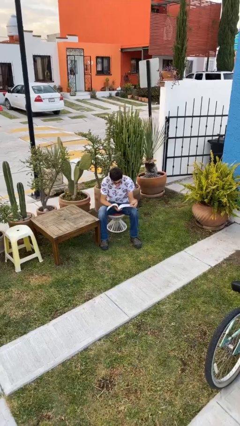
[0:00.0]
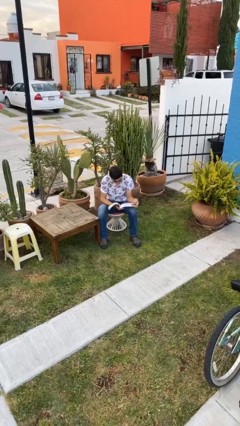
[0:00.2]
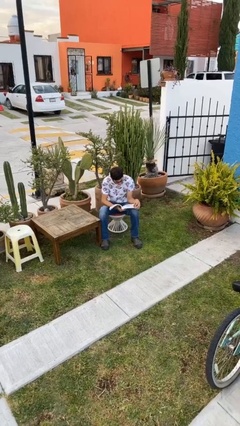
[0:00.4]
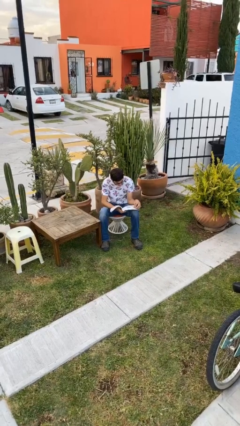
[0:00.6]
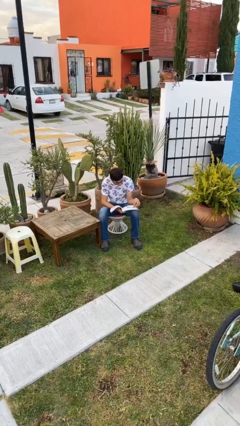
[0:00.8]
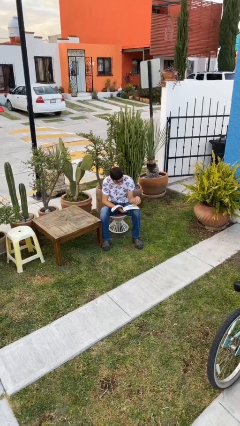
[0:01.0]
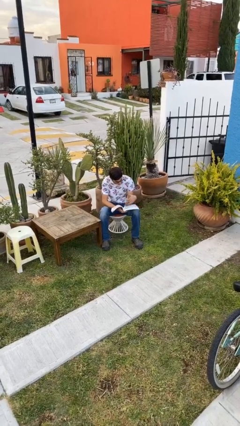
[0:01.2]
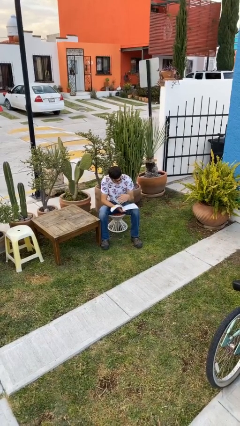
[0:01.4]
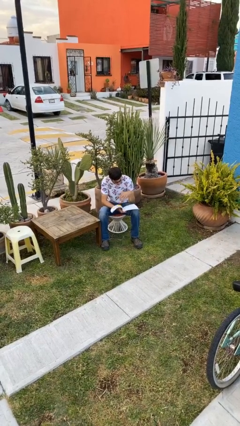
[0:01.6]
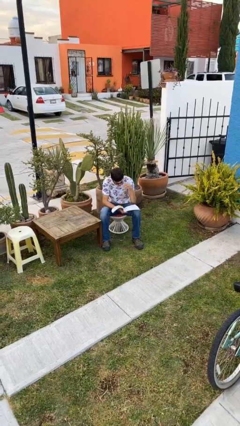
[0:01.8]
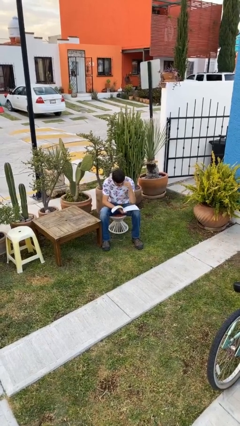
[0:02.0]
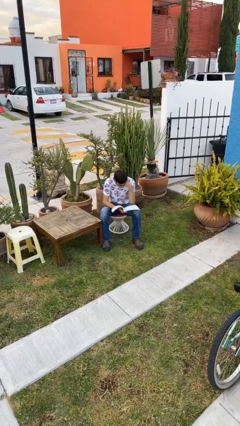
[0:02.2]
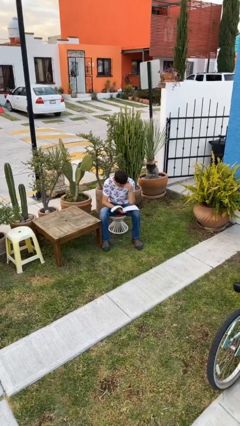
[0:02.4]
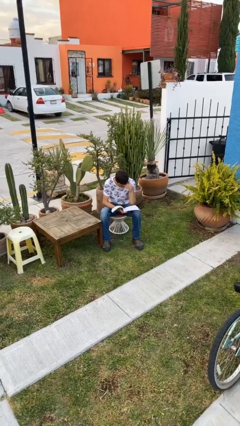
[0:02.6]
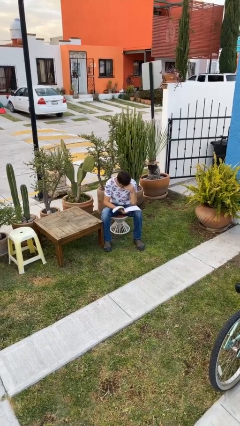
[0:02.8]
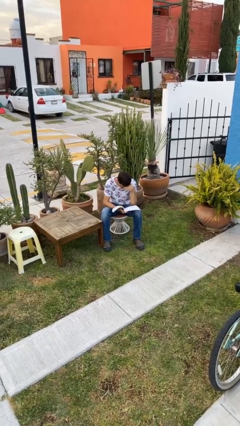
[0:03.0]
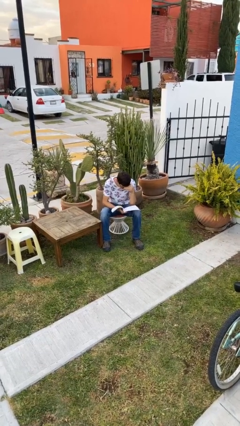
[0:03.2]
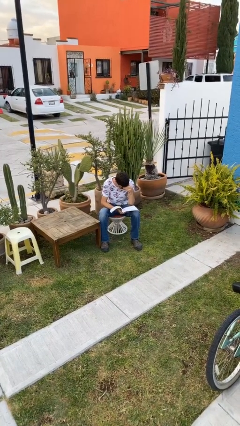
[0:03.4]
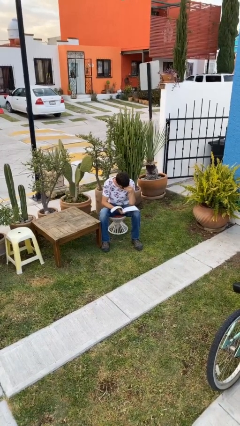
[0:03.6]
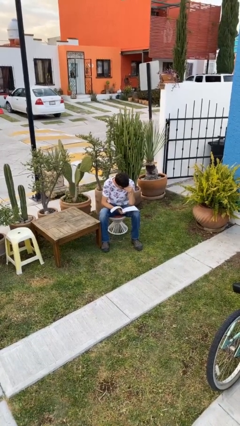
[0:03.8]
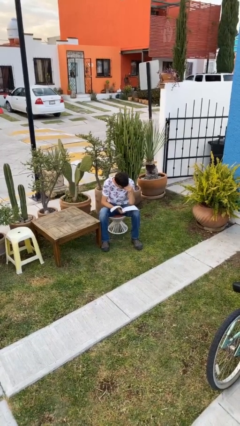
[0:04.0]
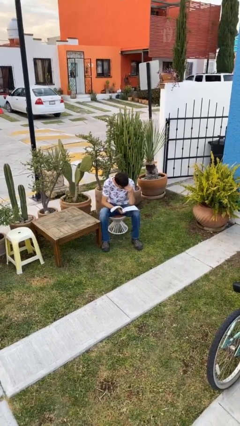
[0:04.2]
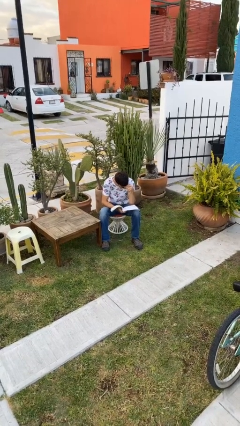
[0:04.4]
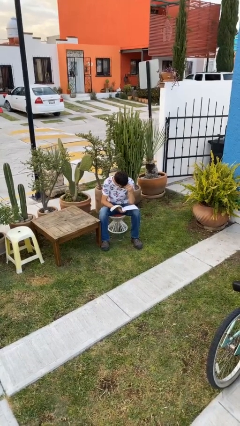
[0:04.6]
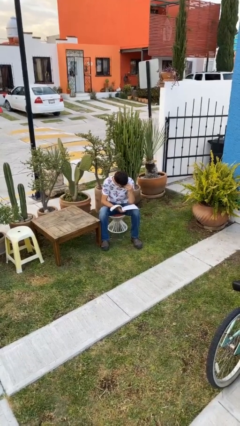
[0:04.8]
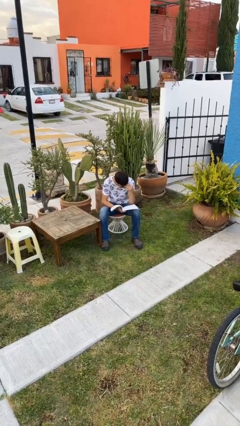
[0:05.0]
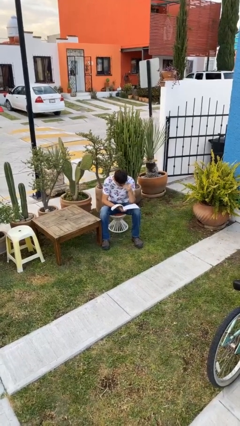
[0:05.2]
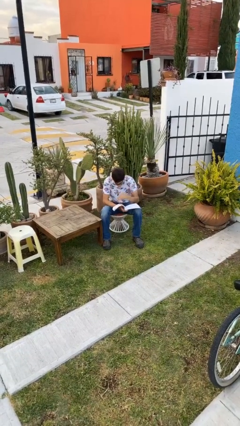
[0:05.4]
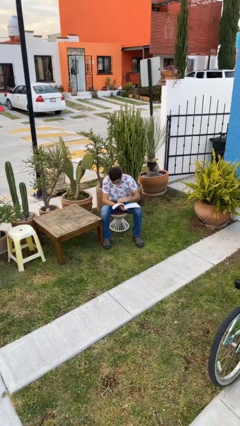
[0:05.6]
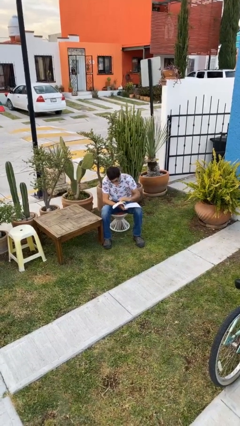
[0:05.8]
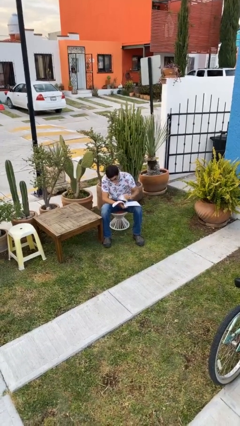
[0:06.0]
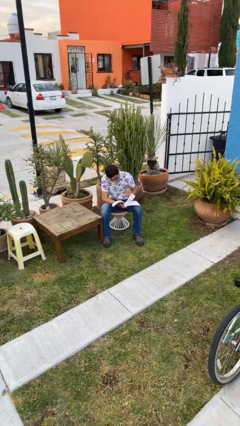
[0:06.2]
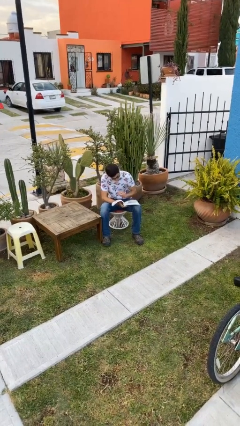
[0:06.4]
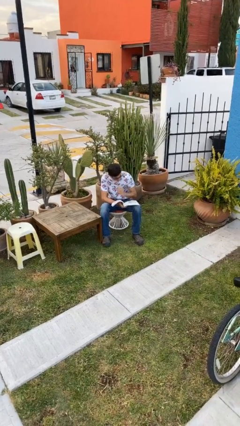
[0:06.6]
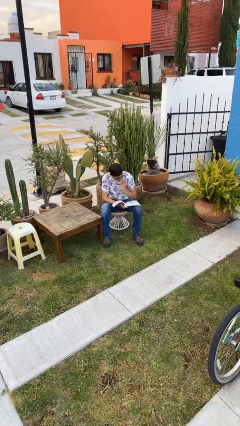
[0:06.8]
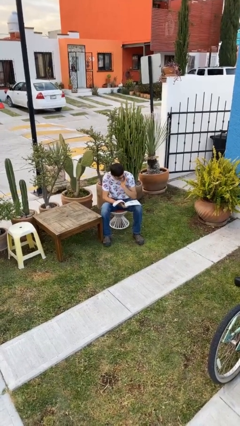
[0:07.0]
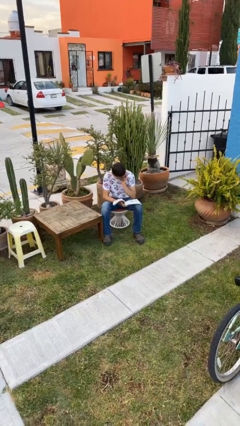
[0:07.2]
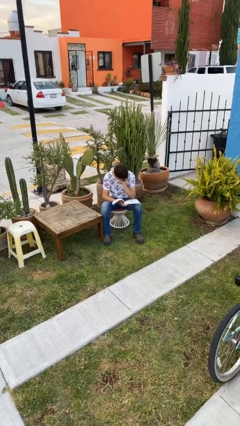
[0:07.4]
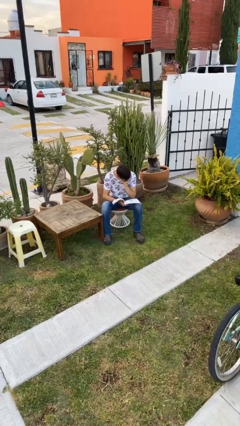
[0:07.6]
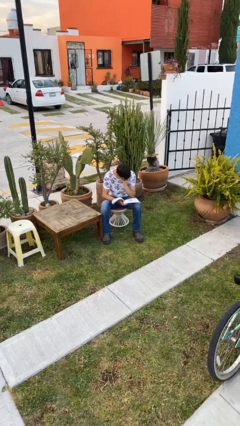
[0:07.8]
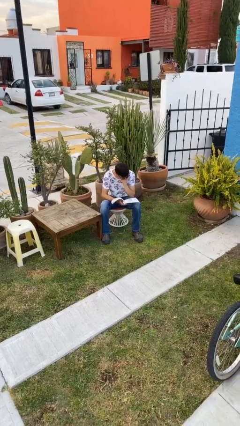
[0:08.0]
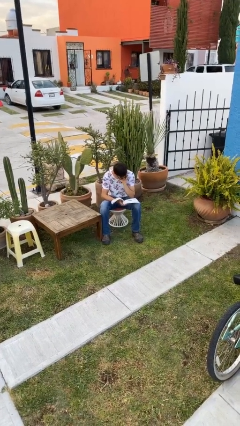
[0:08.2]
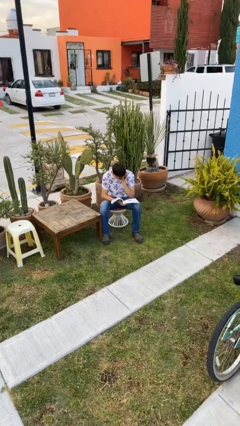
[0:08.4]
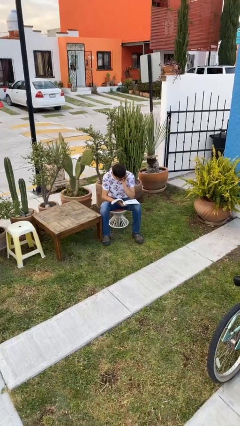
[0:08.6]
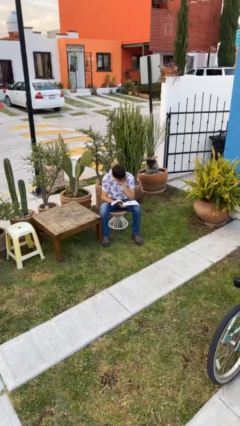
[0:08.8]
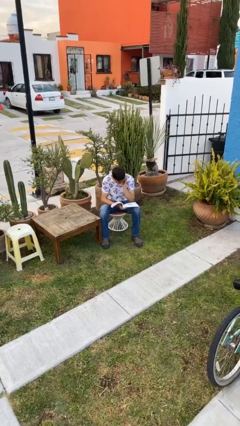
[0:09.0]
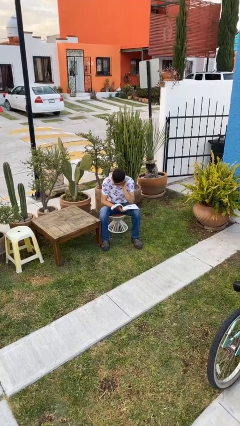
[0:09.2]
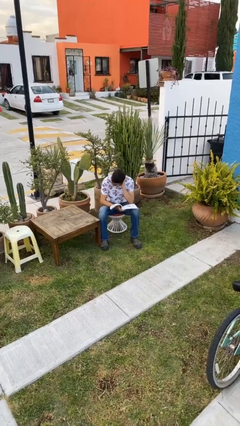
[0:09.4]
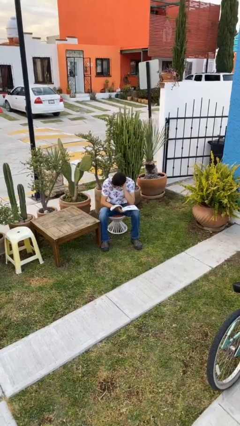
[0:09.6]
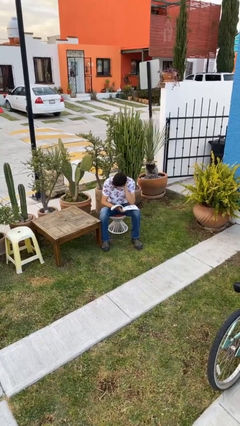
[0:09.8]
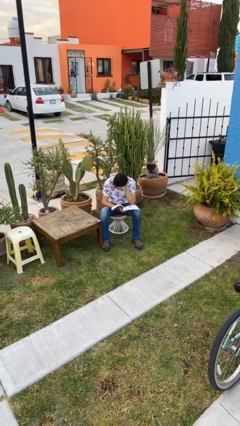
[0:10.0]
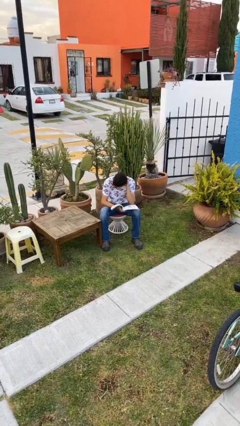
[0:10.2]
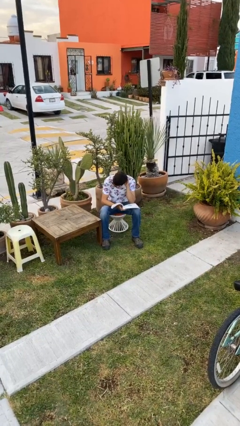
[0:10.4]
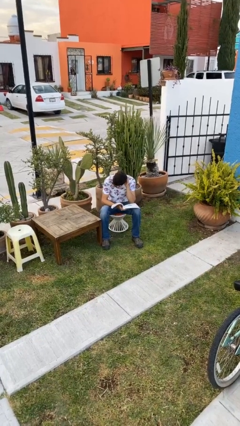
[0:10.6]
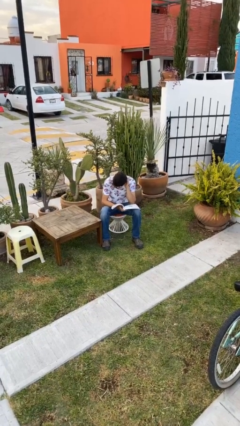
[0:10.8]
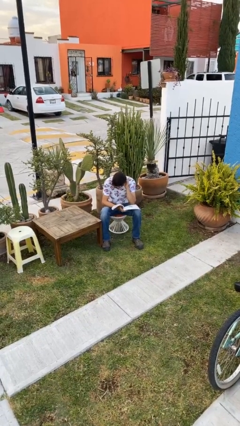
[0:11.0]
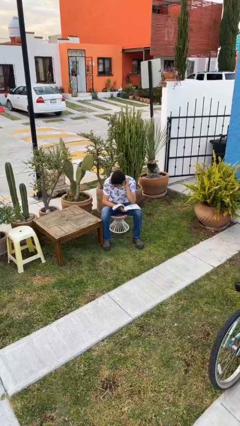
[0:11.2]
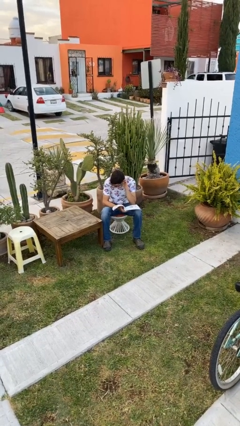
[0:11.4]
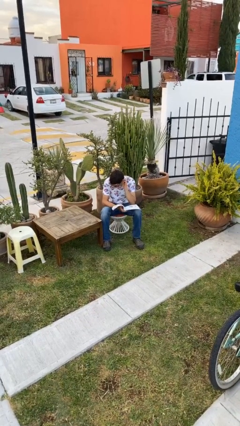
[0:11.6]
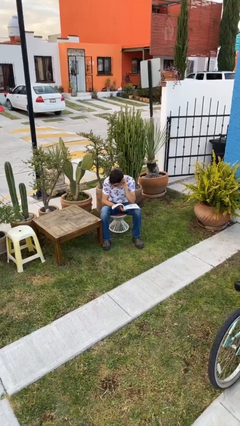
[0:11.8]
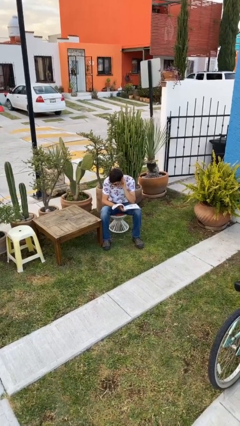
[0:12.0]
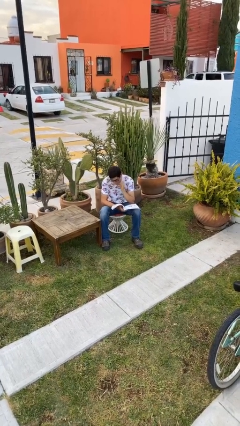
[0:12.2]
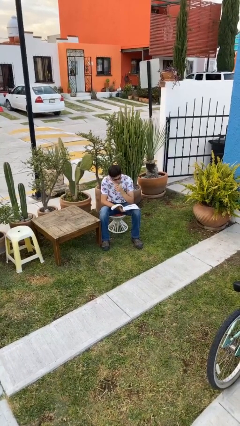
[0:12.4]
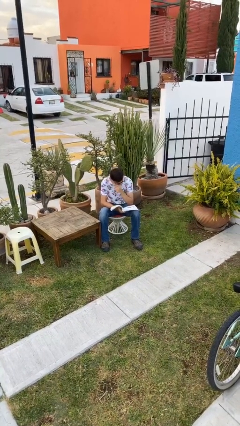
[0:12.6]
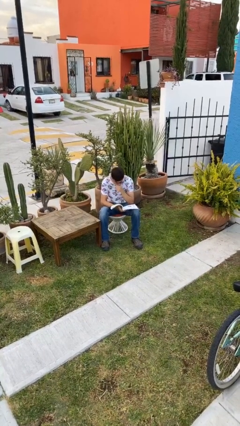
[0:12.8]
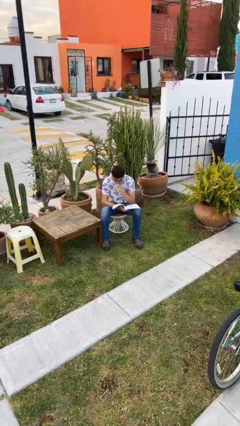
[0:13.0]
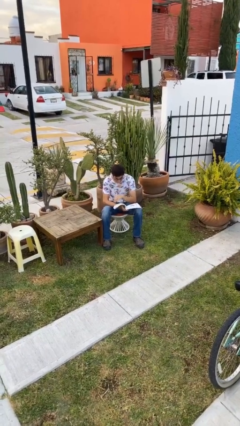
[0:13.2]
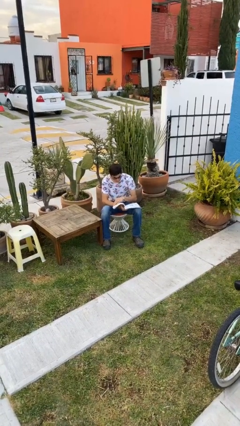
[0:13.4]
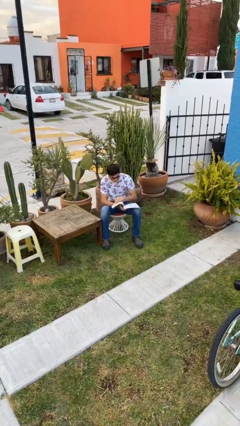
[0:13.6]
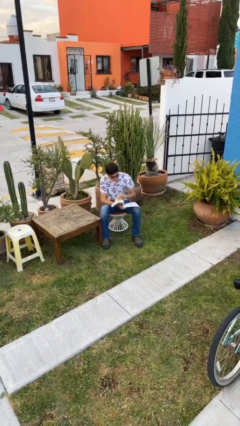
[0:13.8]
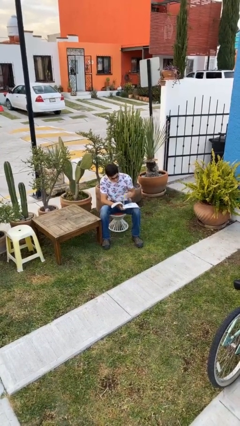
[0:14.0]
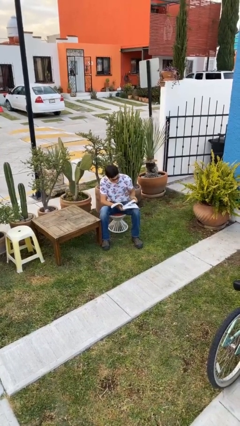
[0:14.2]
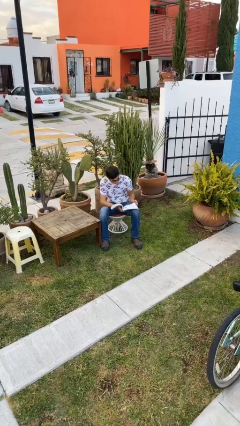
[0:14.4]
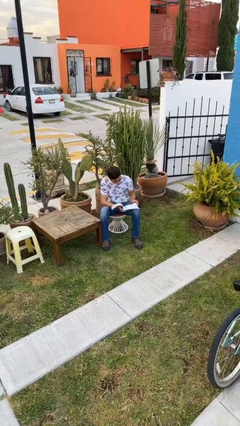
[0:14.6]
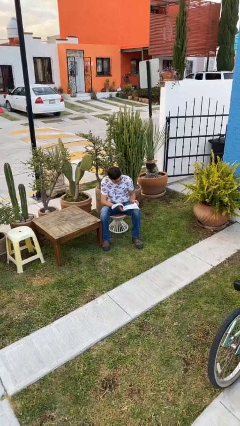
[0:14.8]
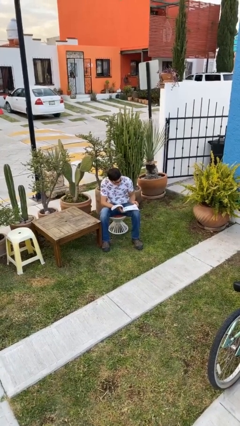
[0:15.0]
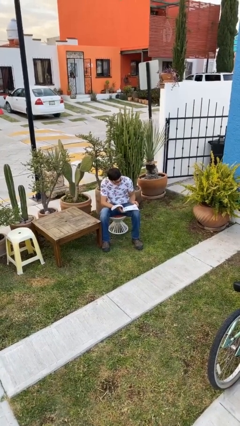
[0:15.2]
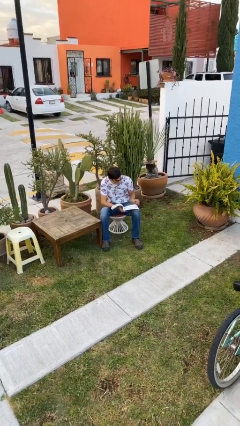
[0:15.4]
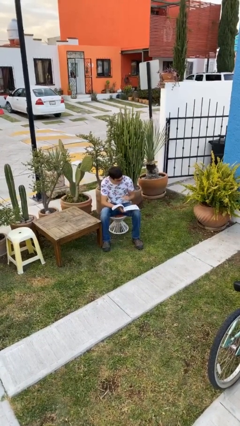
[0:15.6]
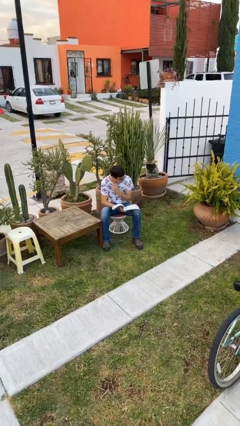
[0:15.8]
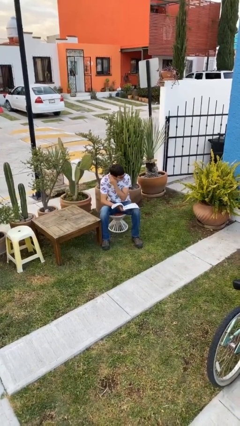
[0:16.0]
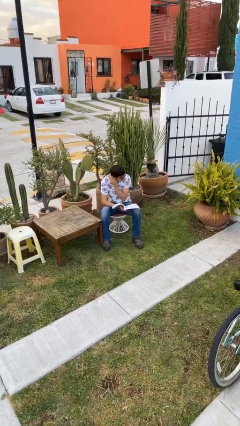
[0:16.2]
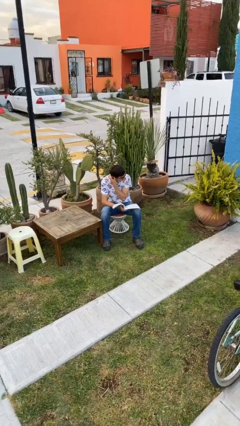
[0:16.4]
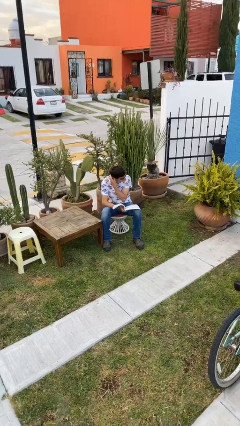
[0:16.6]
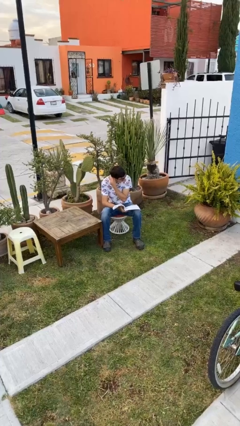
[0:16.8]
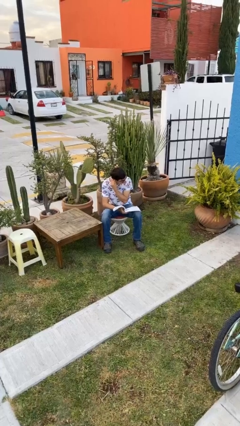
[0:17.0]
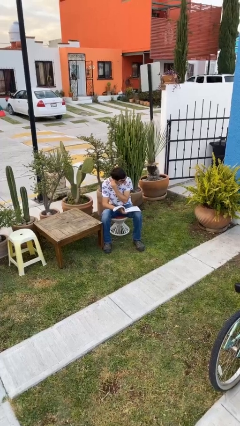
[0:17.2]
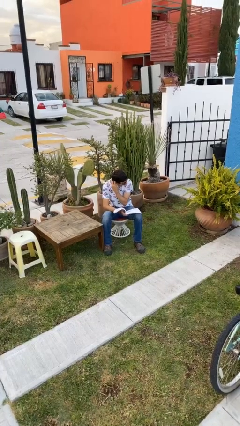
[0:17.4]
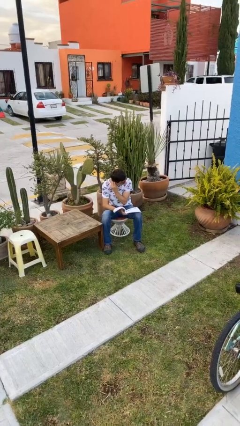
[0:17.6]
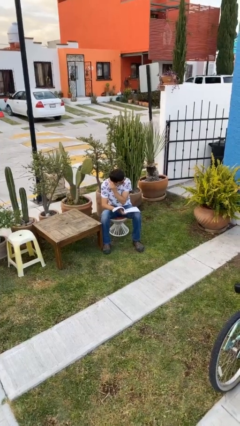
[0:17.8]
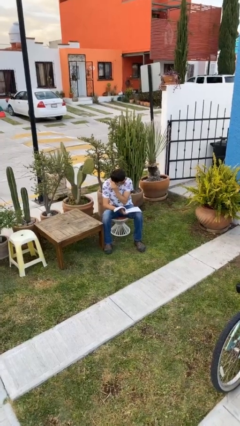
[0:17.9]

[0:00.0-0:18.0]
person reads document

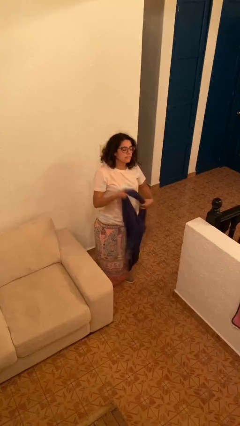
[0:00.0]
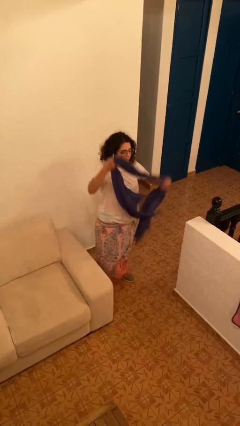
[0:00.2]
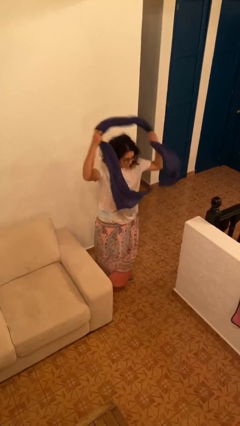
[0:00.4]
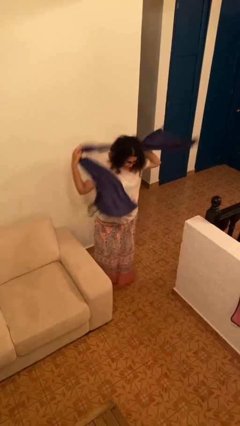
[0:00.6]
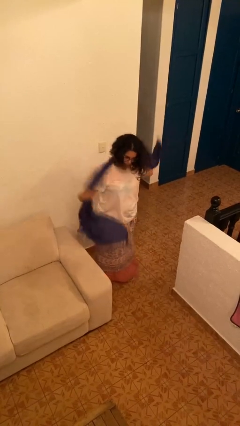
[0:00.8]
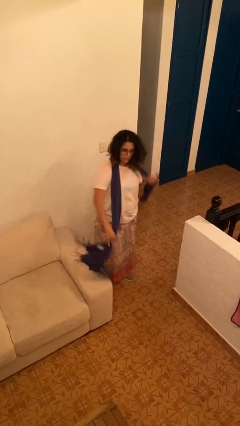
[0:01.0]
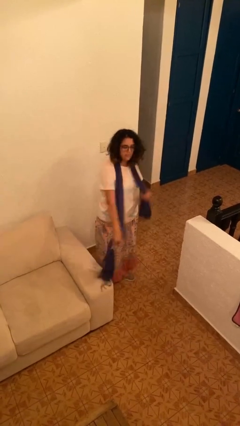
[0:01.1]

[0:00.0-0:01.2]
person puts on scarf
